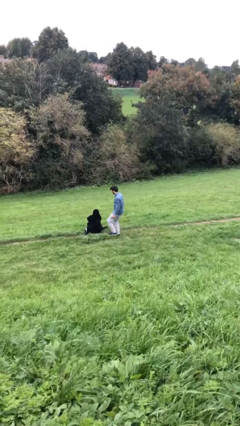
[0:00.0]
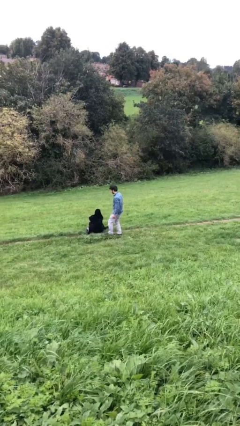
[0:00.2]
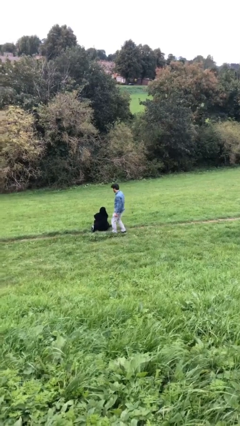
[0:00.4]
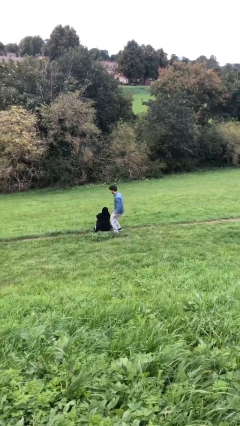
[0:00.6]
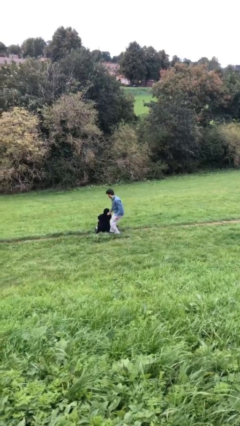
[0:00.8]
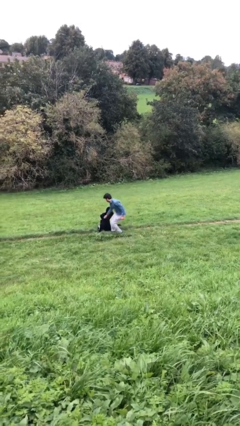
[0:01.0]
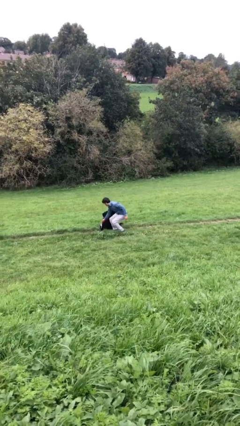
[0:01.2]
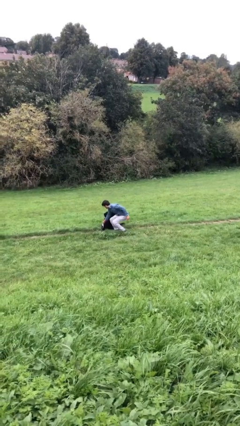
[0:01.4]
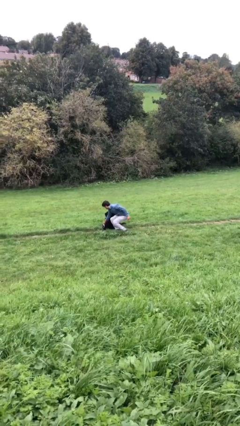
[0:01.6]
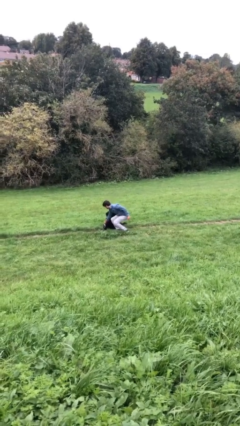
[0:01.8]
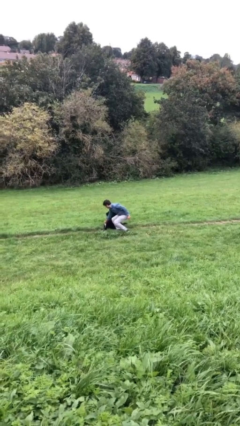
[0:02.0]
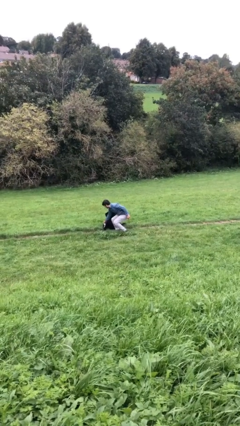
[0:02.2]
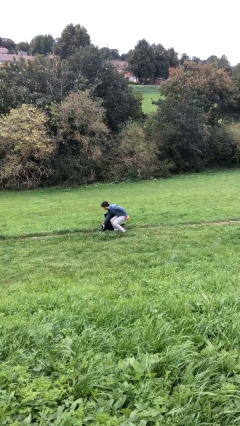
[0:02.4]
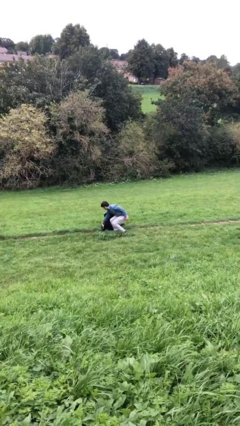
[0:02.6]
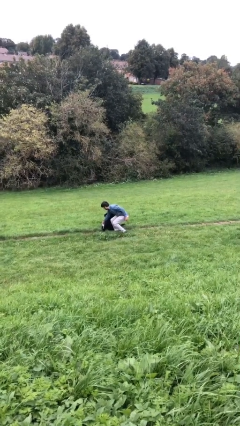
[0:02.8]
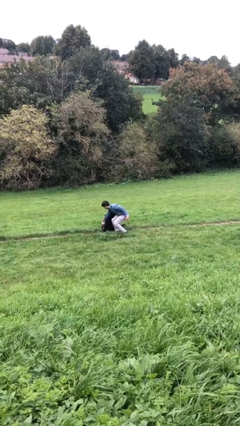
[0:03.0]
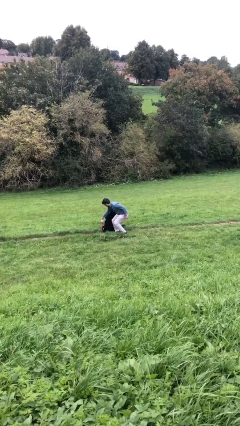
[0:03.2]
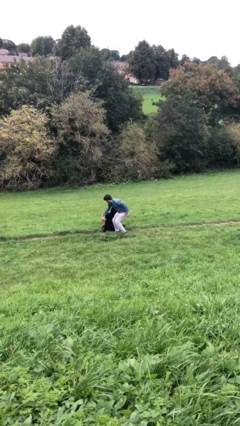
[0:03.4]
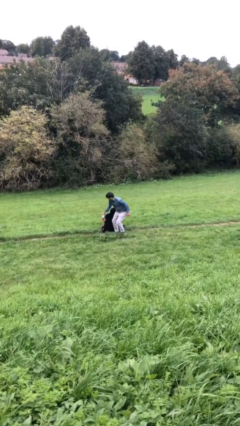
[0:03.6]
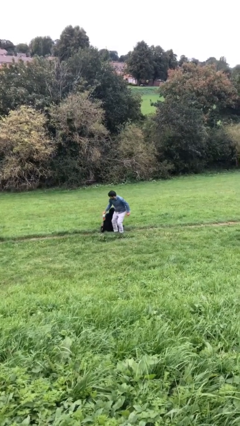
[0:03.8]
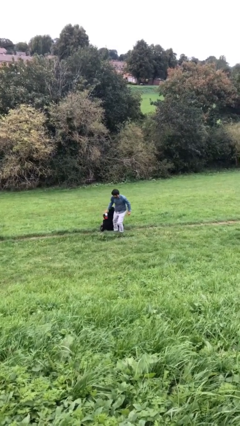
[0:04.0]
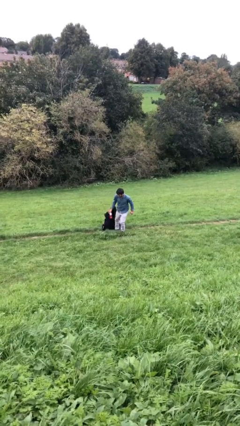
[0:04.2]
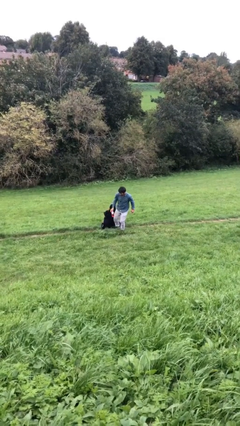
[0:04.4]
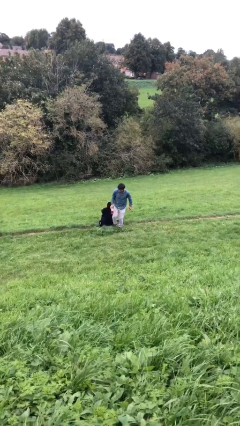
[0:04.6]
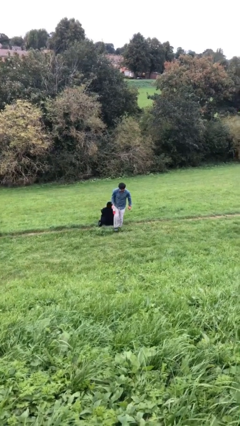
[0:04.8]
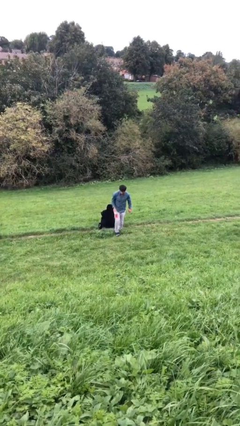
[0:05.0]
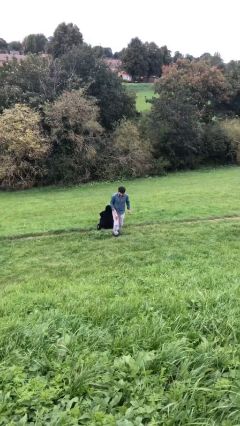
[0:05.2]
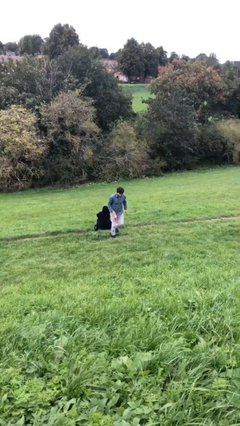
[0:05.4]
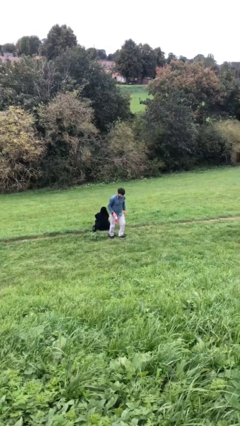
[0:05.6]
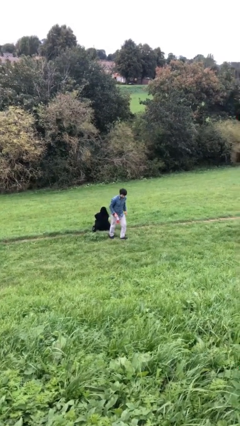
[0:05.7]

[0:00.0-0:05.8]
person steals object from person

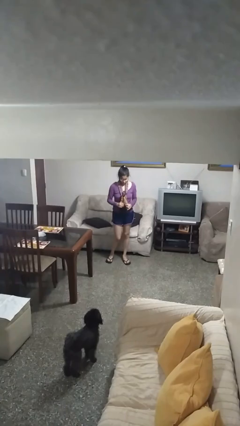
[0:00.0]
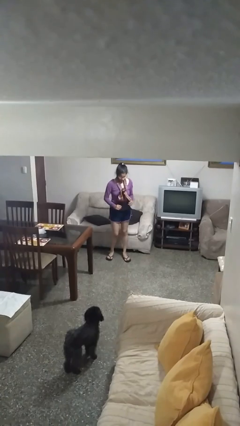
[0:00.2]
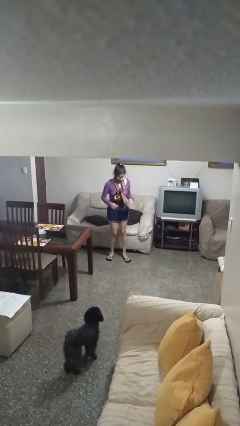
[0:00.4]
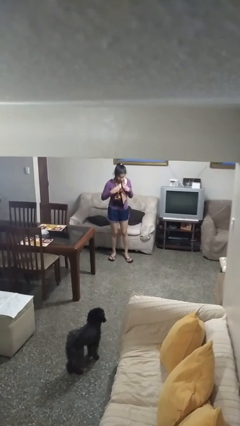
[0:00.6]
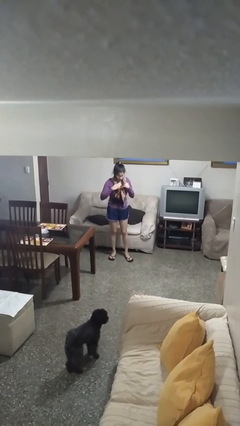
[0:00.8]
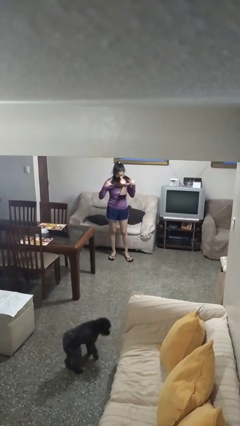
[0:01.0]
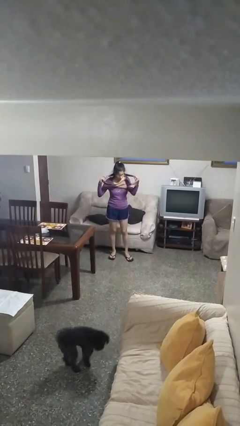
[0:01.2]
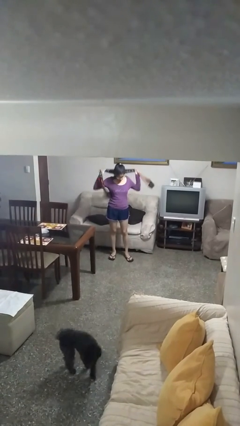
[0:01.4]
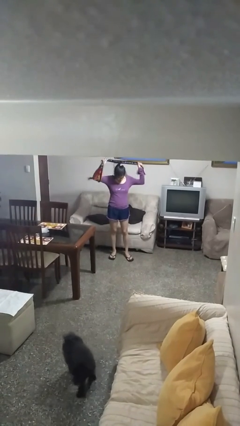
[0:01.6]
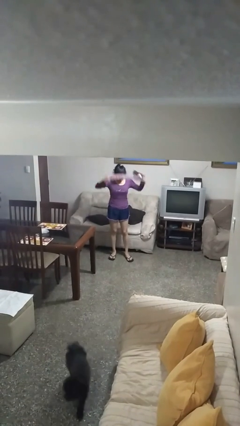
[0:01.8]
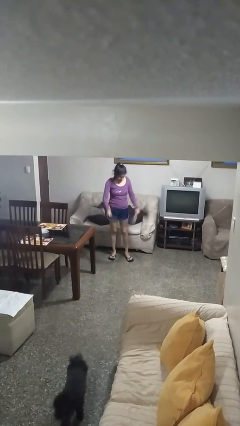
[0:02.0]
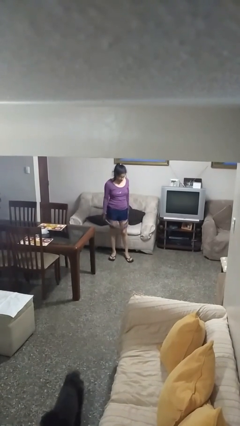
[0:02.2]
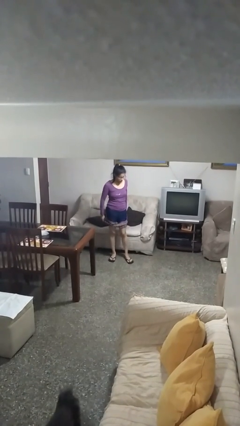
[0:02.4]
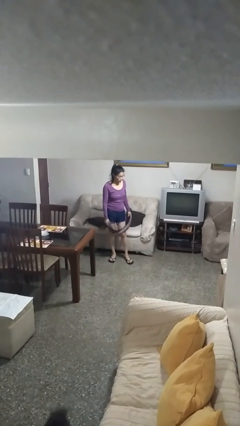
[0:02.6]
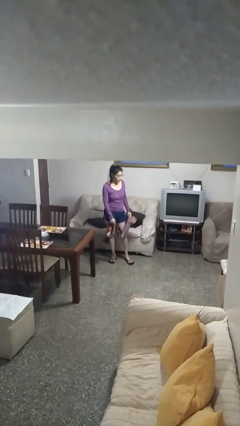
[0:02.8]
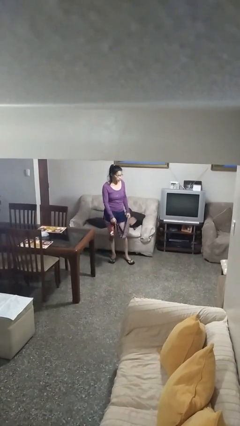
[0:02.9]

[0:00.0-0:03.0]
person takes off scarf

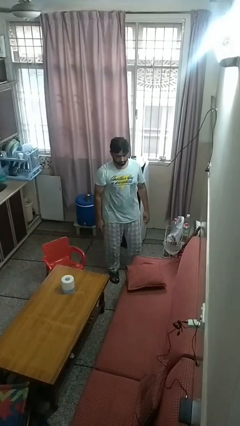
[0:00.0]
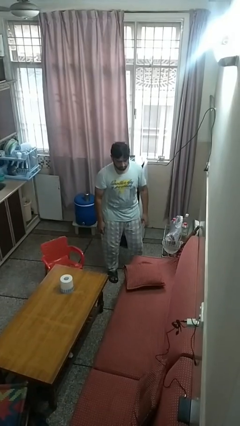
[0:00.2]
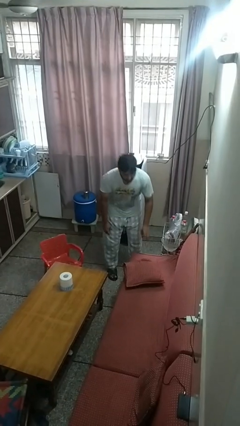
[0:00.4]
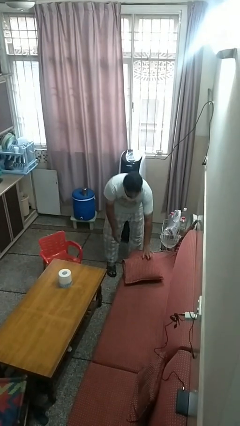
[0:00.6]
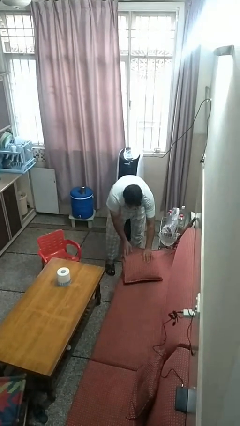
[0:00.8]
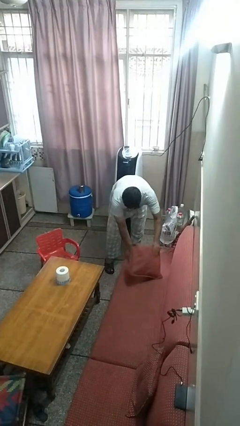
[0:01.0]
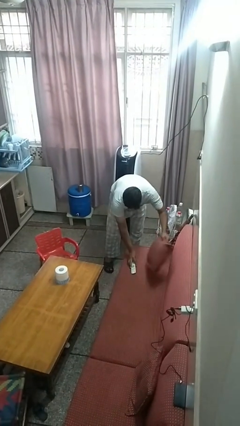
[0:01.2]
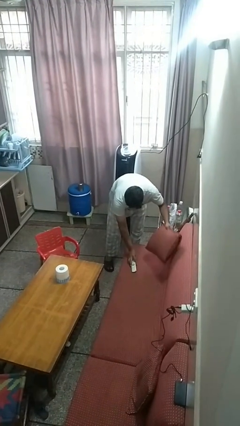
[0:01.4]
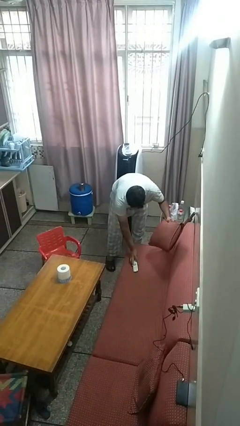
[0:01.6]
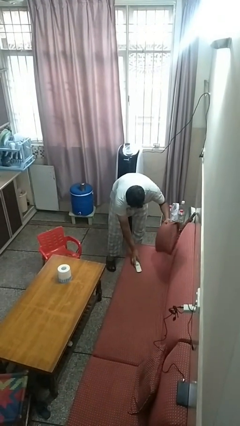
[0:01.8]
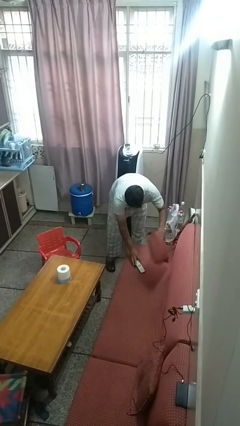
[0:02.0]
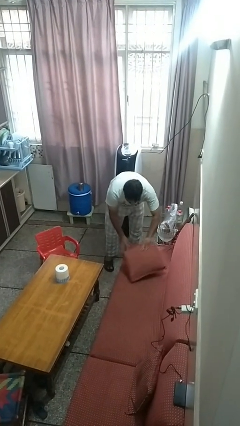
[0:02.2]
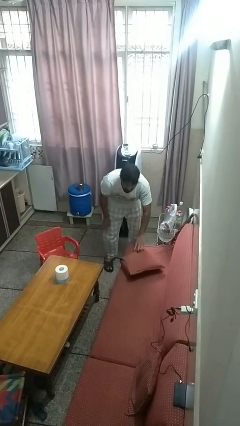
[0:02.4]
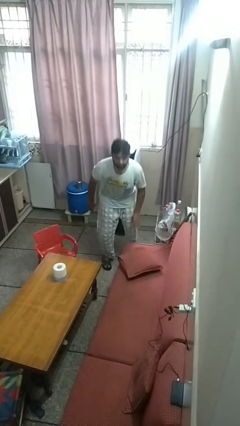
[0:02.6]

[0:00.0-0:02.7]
person searches in couch

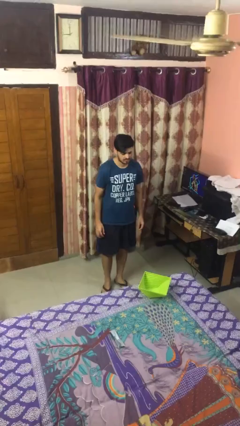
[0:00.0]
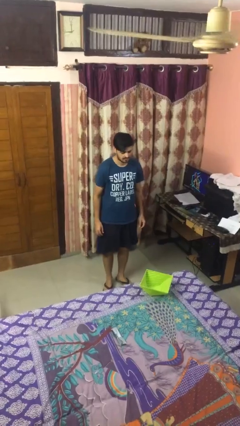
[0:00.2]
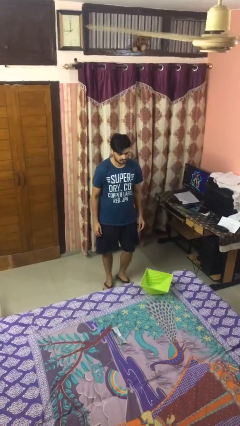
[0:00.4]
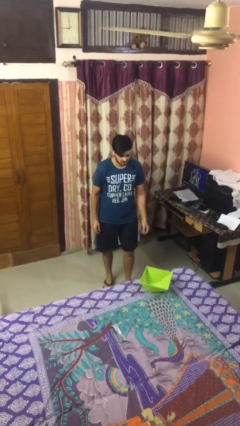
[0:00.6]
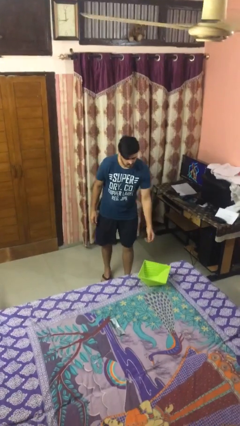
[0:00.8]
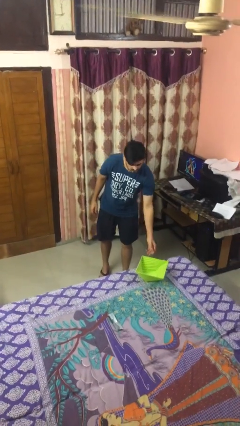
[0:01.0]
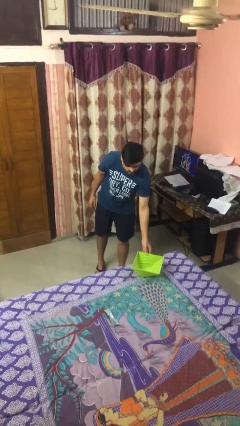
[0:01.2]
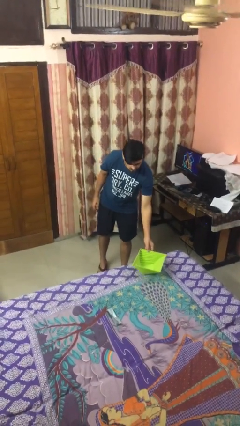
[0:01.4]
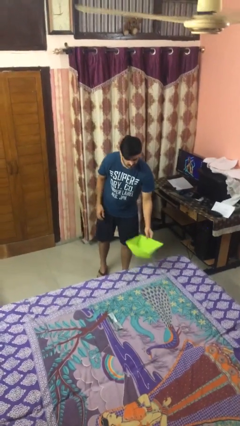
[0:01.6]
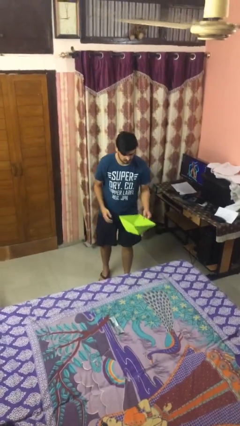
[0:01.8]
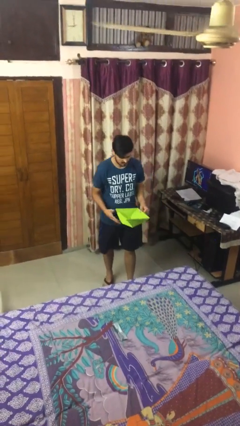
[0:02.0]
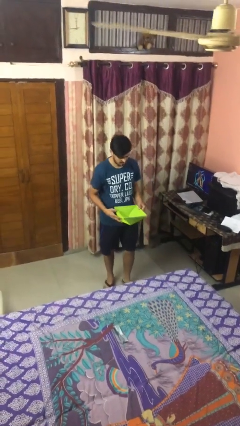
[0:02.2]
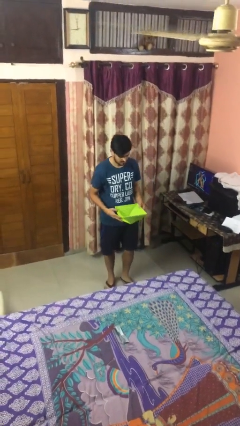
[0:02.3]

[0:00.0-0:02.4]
person picks up object from bed

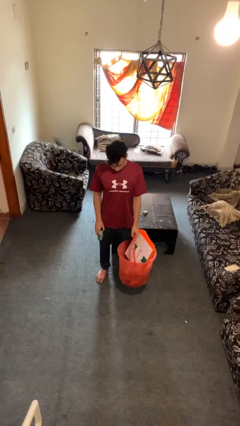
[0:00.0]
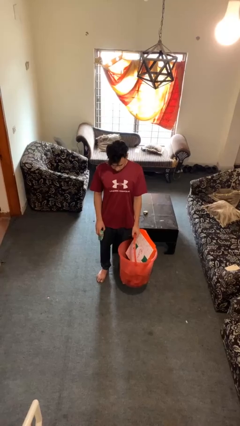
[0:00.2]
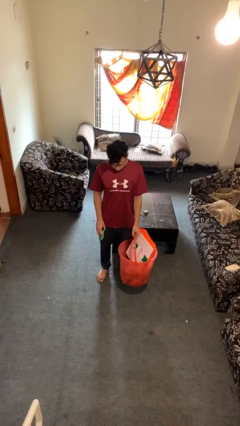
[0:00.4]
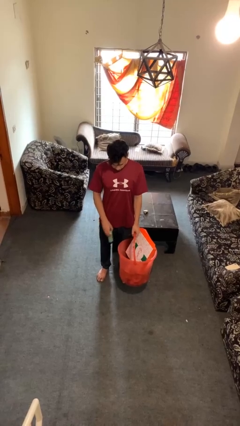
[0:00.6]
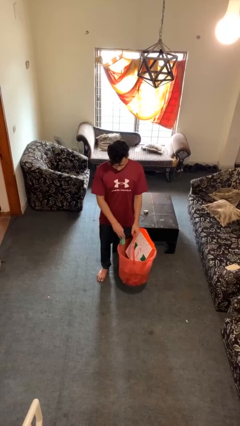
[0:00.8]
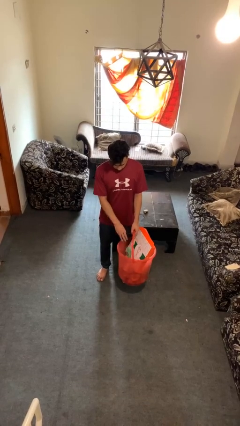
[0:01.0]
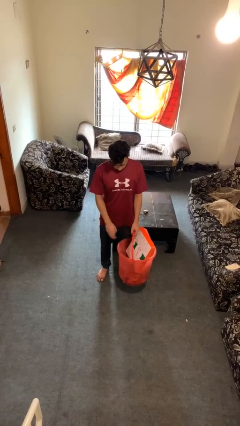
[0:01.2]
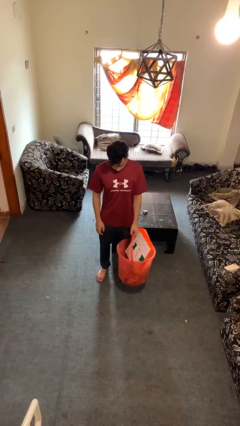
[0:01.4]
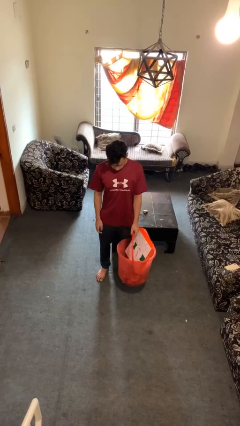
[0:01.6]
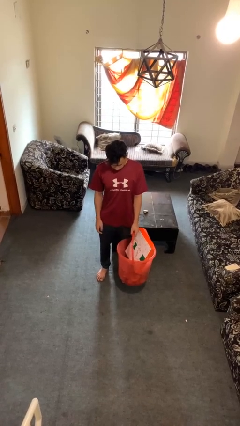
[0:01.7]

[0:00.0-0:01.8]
person puts object into basket

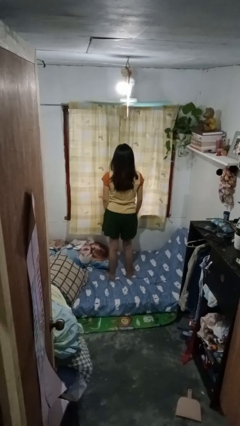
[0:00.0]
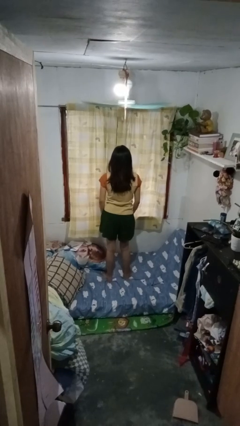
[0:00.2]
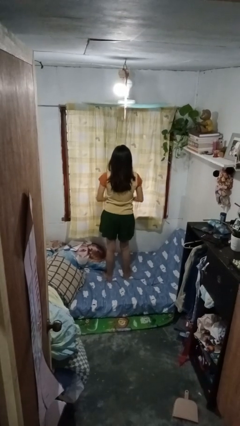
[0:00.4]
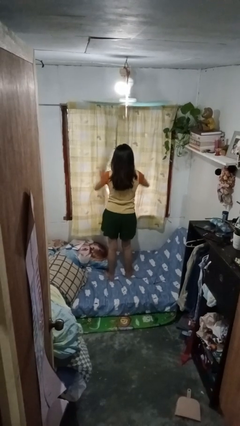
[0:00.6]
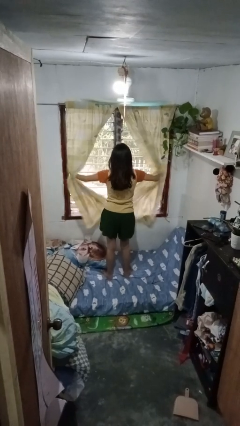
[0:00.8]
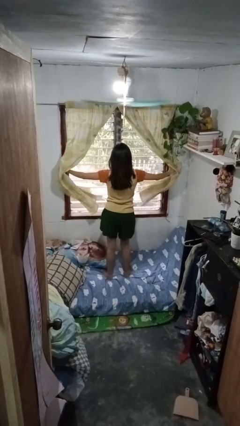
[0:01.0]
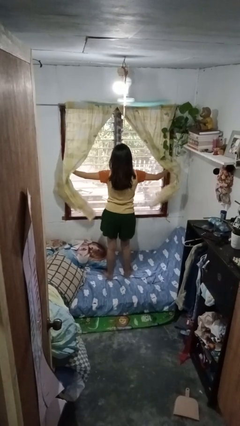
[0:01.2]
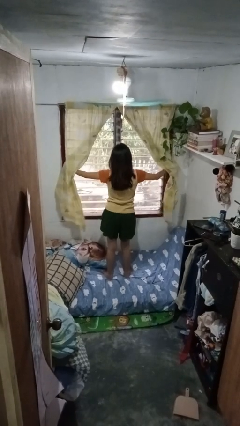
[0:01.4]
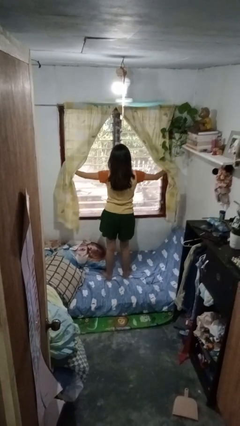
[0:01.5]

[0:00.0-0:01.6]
person opens curtains

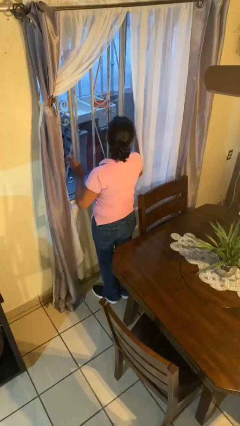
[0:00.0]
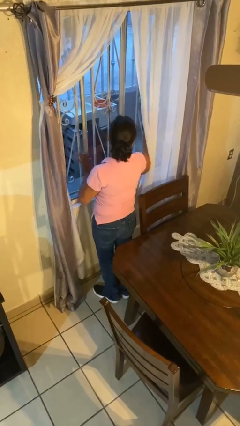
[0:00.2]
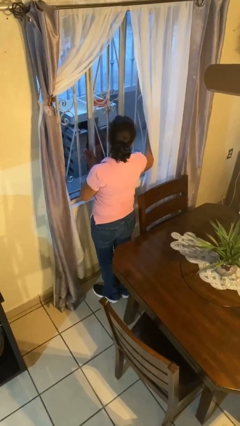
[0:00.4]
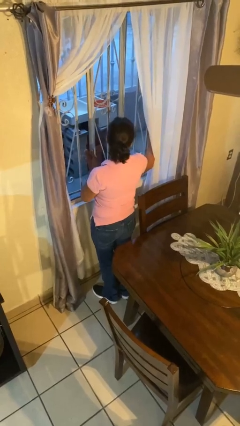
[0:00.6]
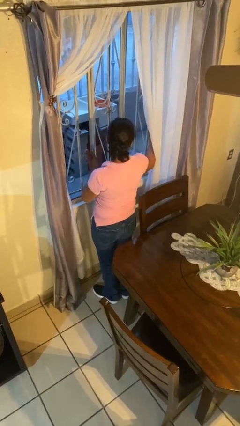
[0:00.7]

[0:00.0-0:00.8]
person opens home window
